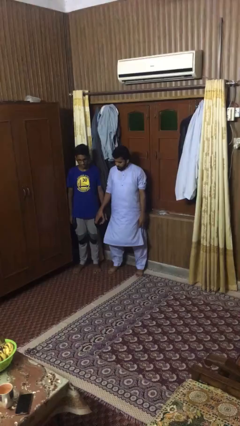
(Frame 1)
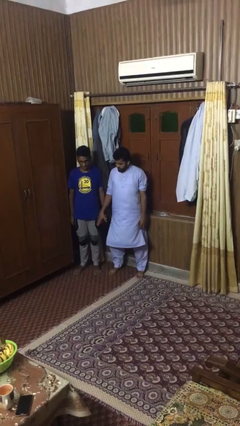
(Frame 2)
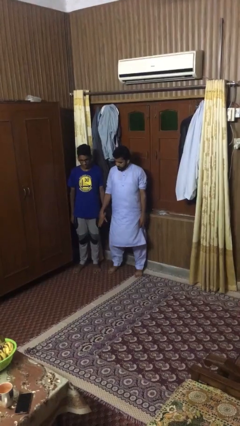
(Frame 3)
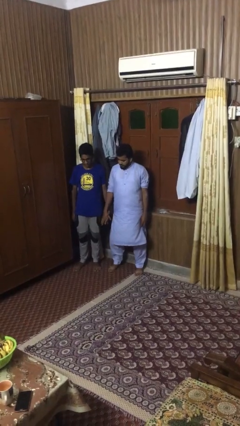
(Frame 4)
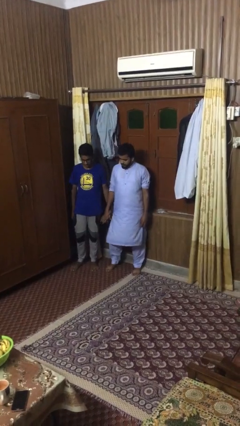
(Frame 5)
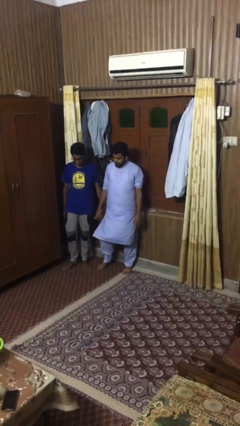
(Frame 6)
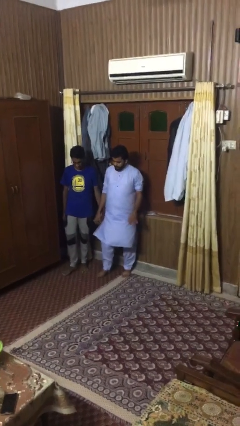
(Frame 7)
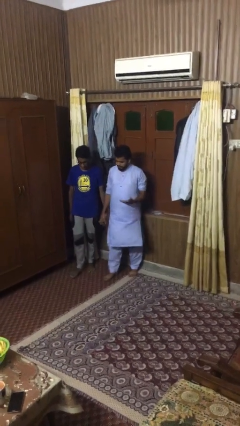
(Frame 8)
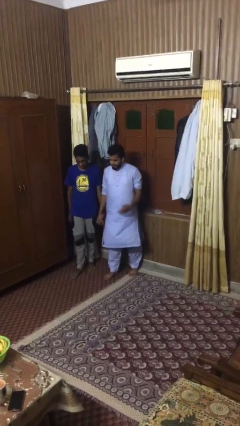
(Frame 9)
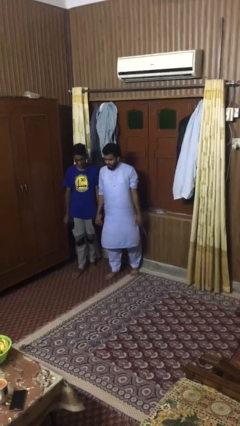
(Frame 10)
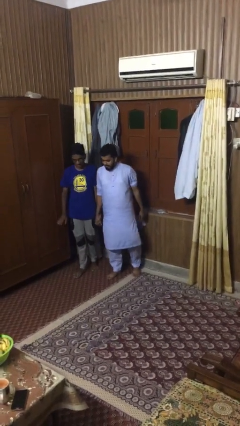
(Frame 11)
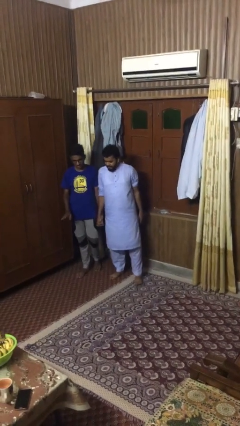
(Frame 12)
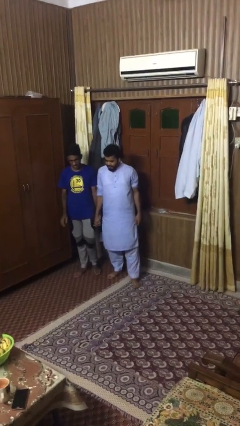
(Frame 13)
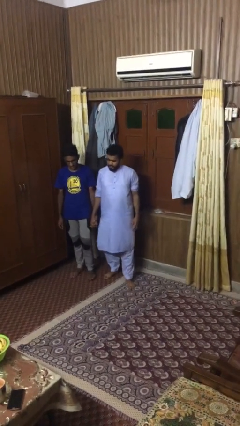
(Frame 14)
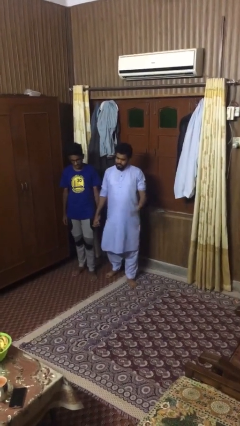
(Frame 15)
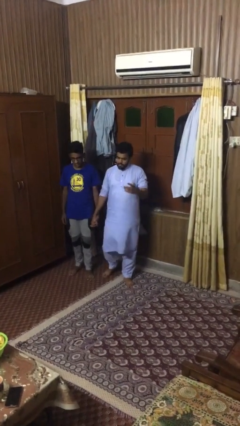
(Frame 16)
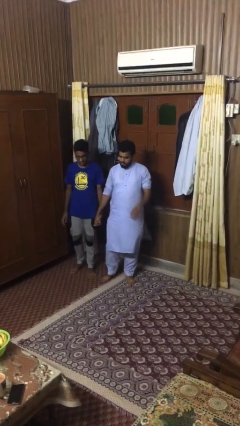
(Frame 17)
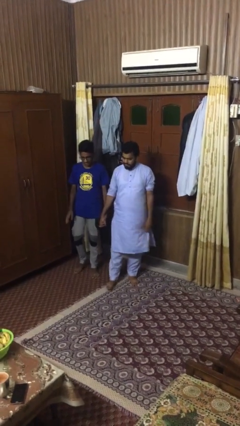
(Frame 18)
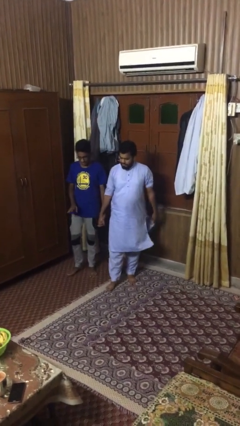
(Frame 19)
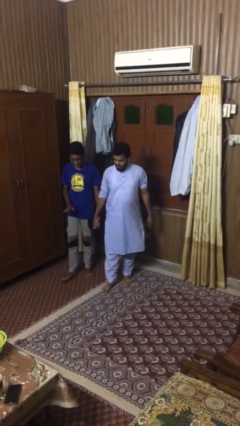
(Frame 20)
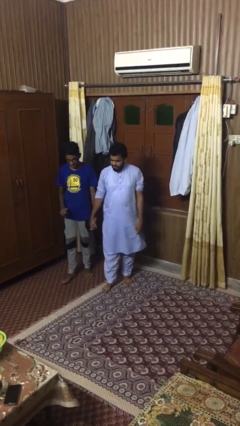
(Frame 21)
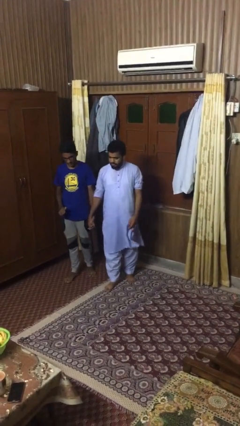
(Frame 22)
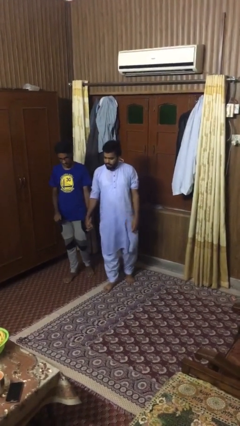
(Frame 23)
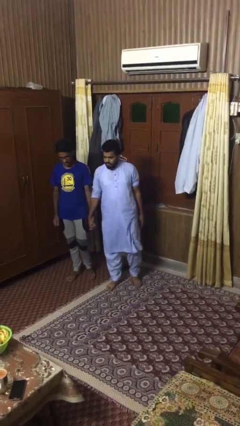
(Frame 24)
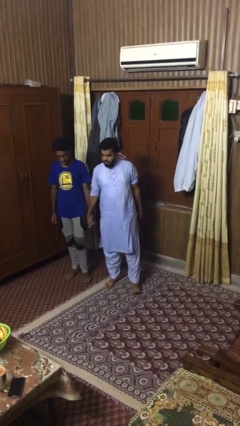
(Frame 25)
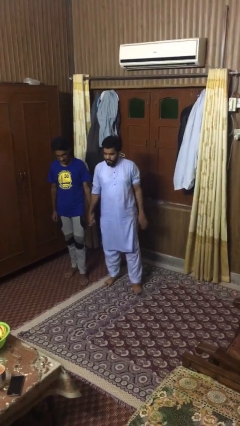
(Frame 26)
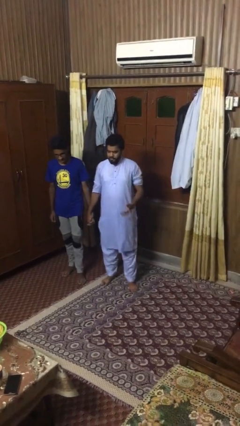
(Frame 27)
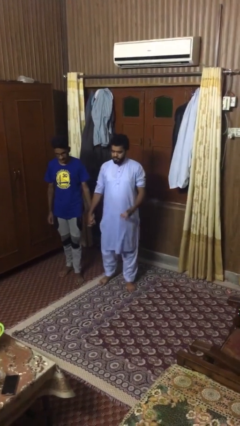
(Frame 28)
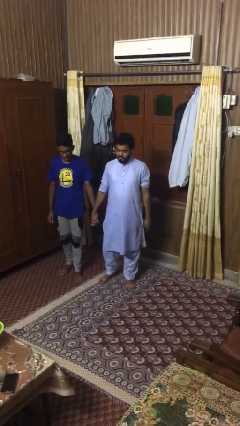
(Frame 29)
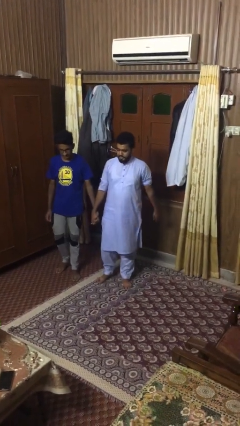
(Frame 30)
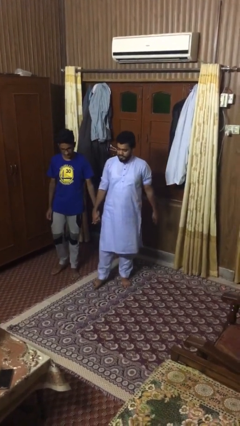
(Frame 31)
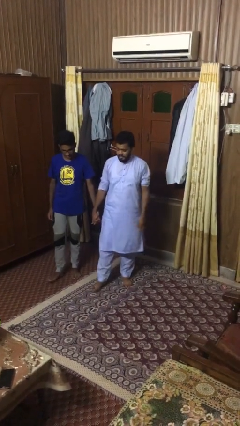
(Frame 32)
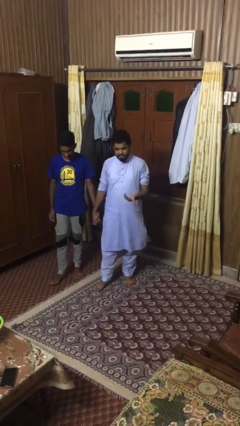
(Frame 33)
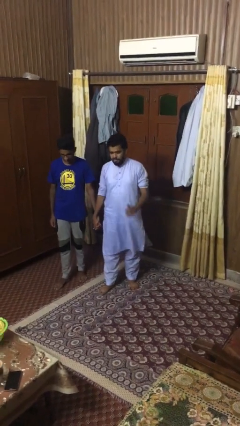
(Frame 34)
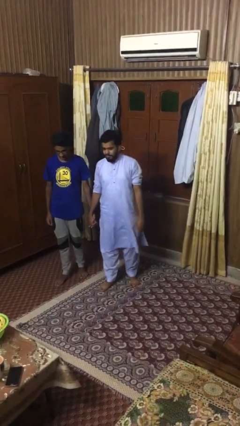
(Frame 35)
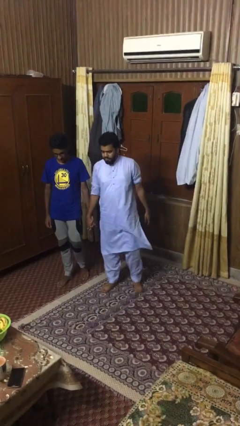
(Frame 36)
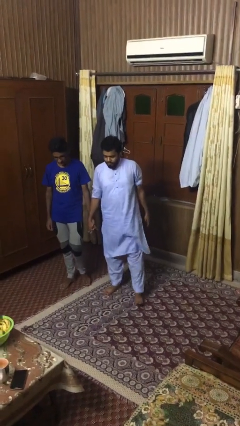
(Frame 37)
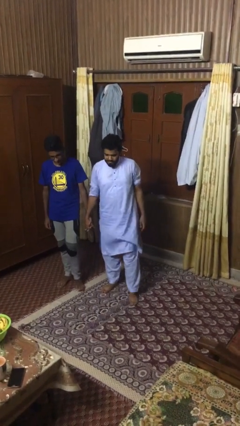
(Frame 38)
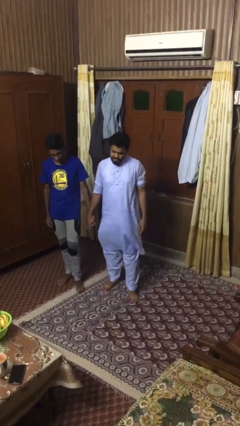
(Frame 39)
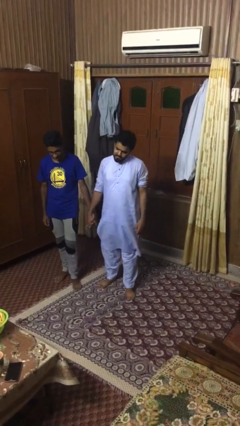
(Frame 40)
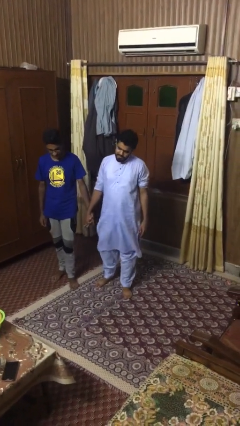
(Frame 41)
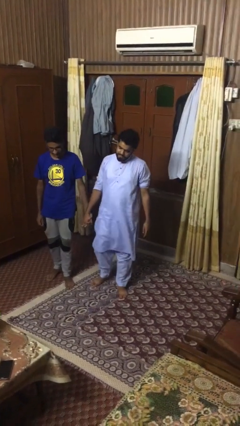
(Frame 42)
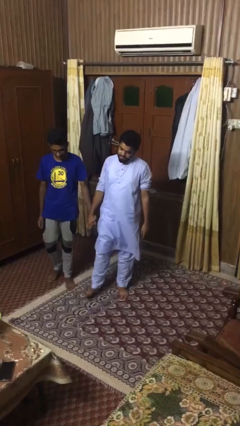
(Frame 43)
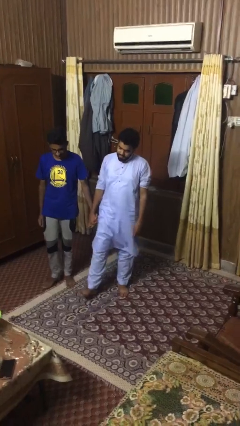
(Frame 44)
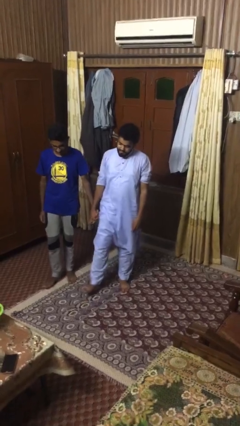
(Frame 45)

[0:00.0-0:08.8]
person holds hand

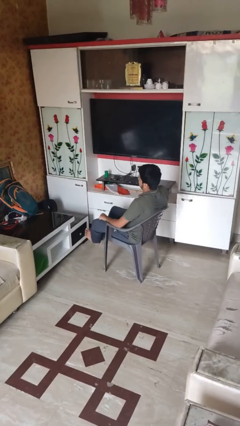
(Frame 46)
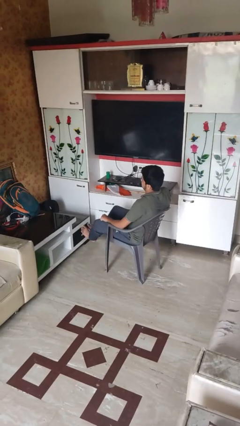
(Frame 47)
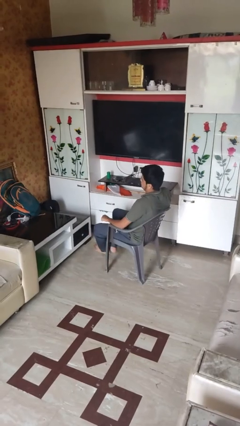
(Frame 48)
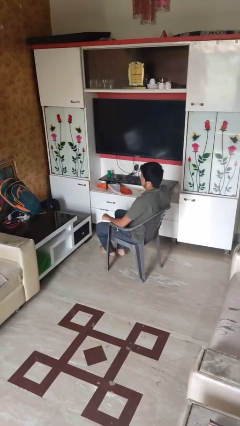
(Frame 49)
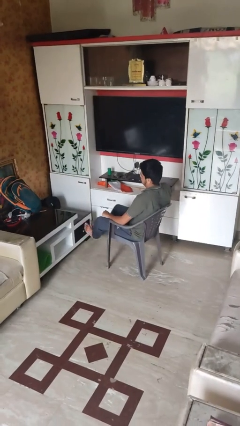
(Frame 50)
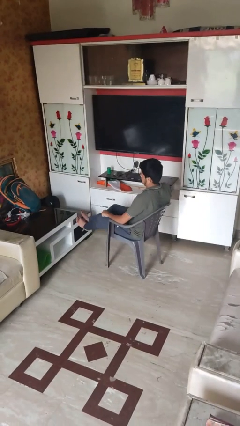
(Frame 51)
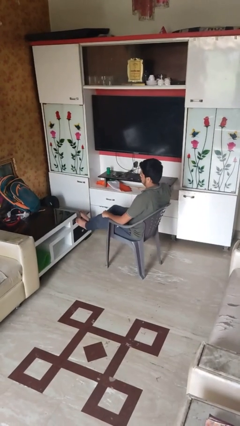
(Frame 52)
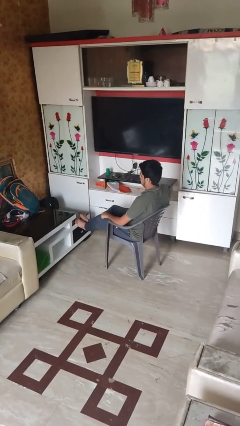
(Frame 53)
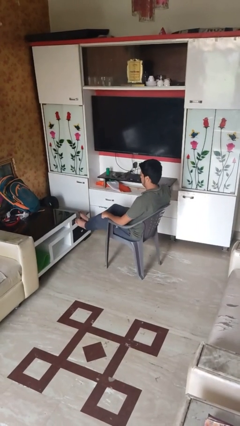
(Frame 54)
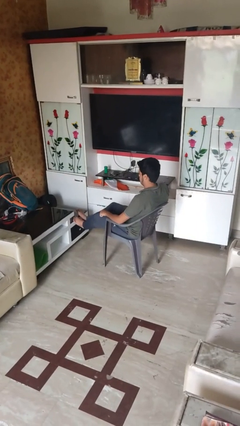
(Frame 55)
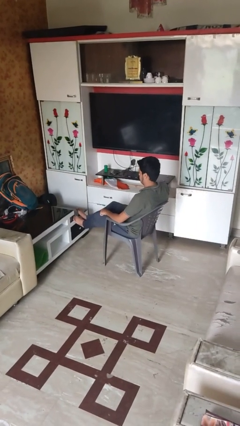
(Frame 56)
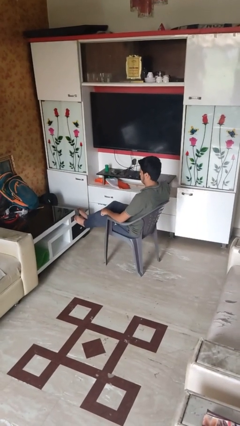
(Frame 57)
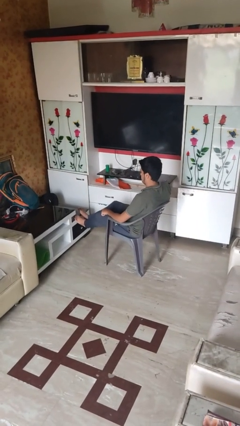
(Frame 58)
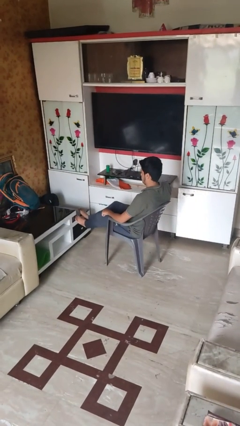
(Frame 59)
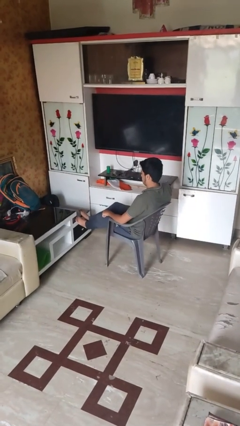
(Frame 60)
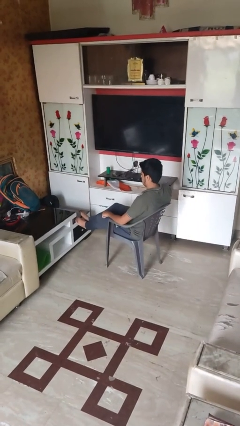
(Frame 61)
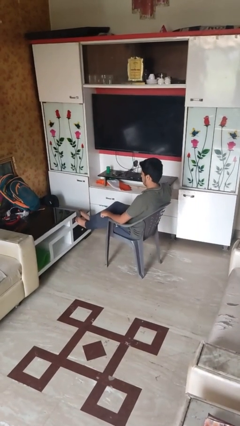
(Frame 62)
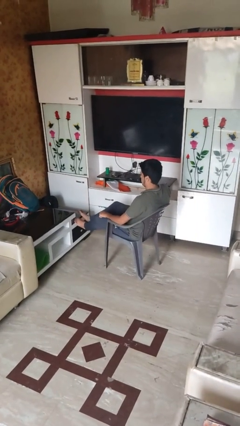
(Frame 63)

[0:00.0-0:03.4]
person puts feet up

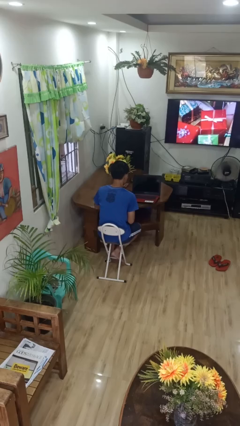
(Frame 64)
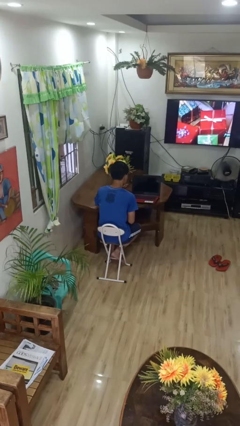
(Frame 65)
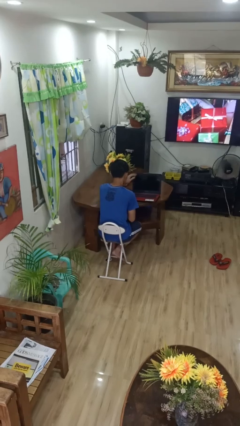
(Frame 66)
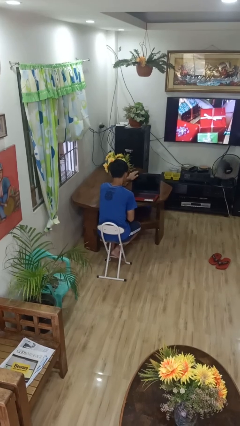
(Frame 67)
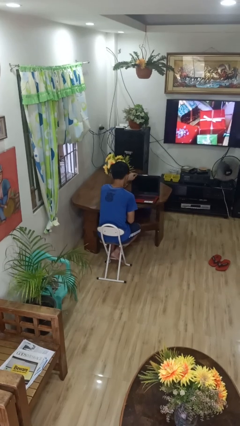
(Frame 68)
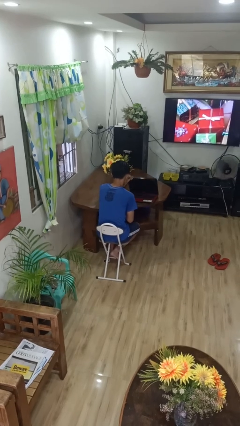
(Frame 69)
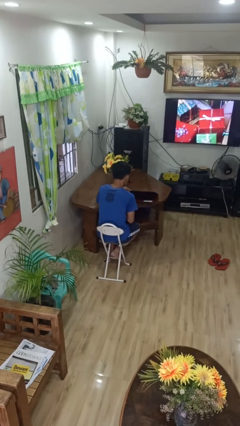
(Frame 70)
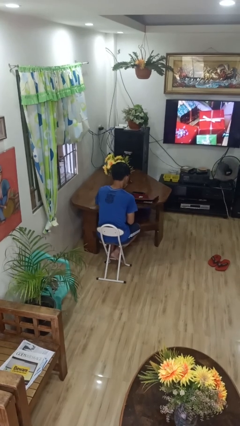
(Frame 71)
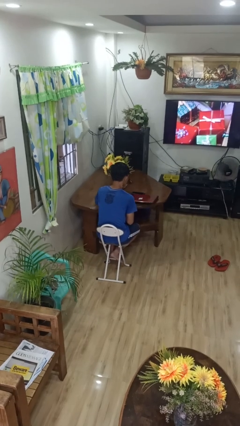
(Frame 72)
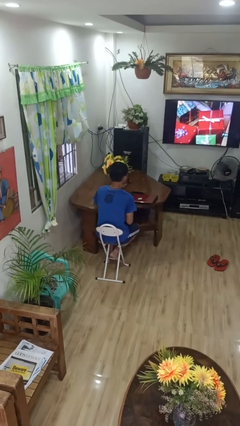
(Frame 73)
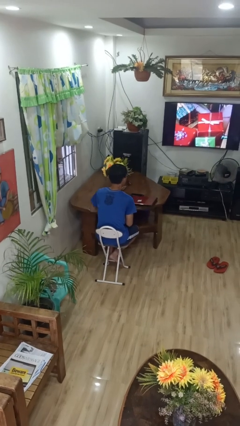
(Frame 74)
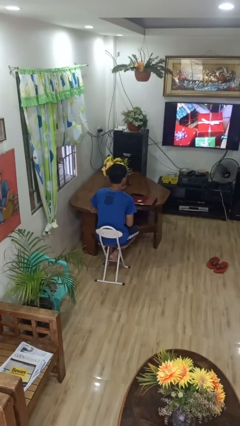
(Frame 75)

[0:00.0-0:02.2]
person closes laptop

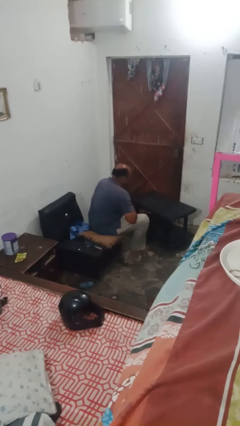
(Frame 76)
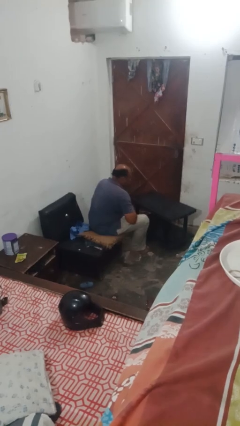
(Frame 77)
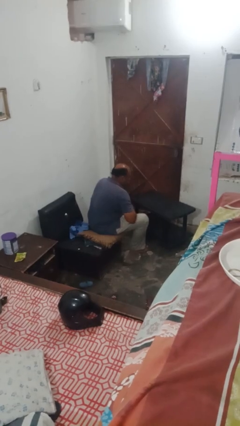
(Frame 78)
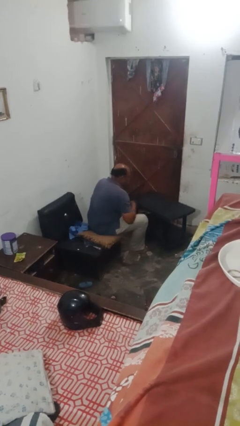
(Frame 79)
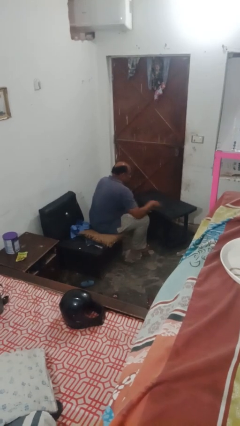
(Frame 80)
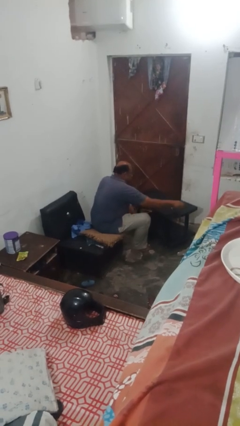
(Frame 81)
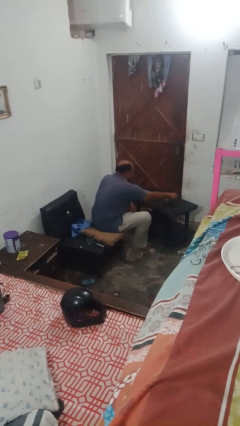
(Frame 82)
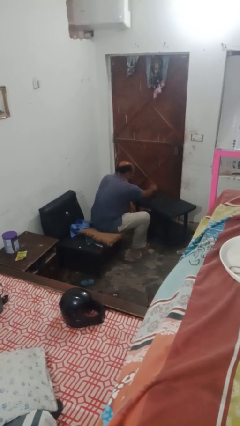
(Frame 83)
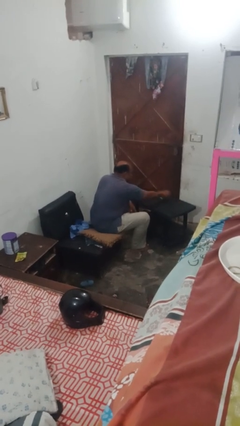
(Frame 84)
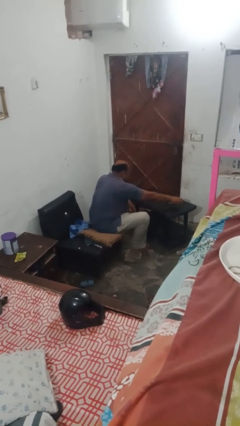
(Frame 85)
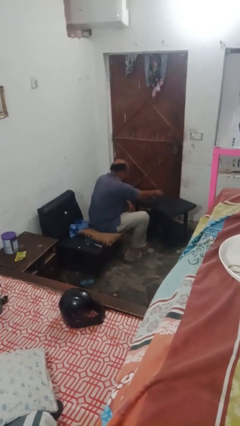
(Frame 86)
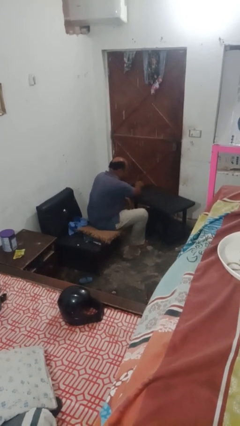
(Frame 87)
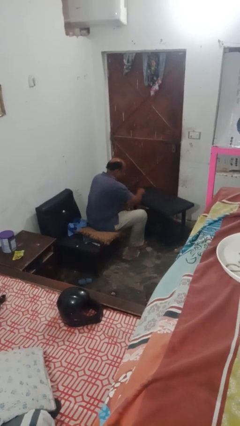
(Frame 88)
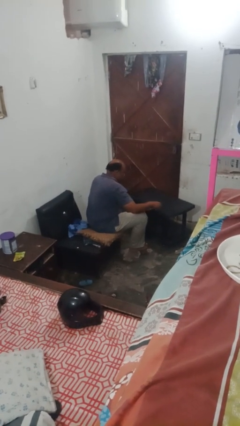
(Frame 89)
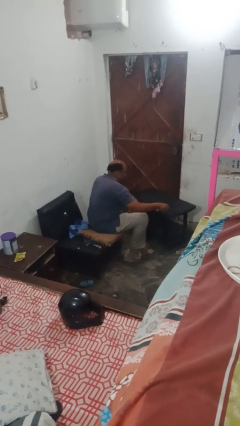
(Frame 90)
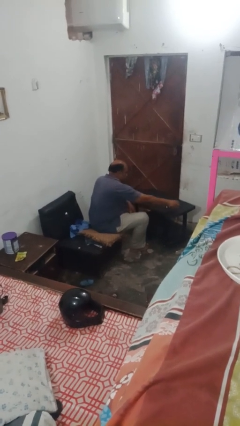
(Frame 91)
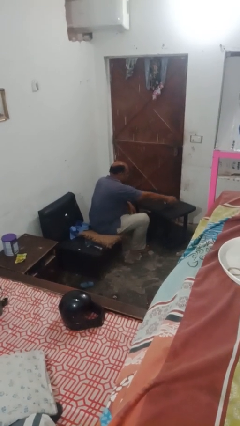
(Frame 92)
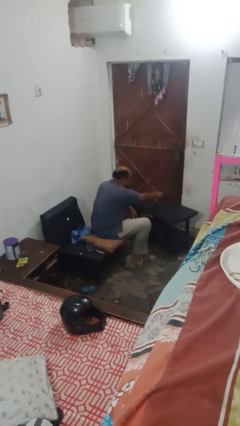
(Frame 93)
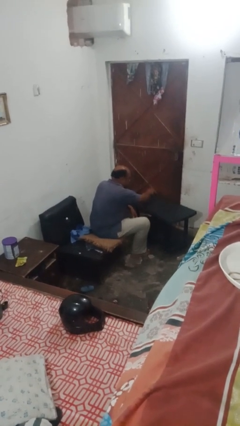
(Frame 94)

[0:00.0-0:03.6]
person sprays from bottle

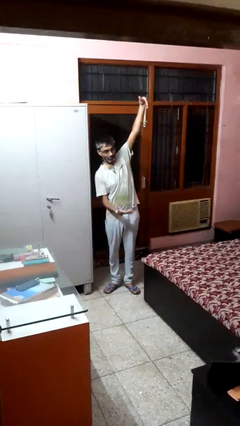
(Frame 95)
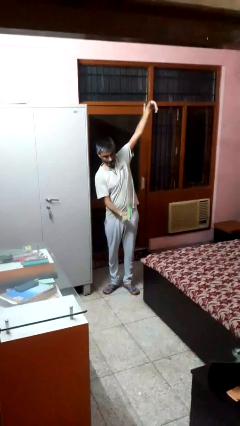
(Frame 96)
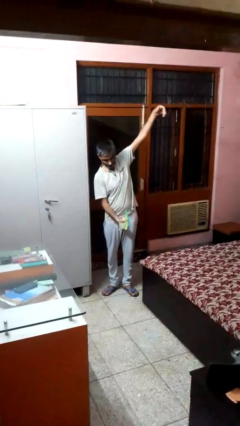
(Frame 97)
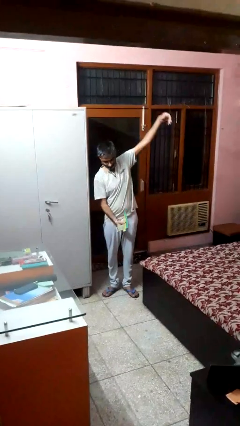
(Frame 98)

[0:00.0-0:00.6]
person catches dropped object
